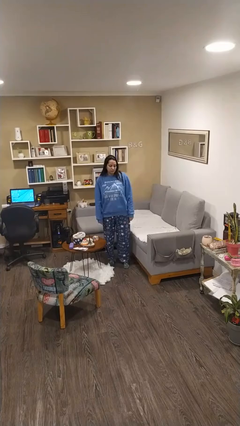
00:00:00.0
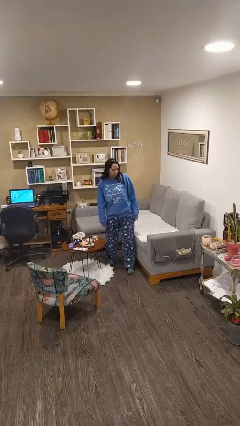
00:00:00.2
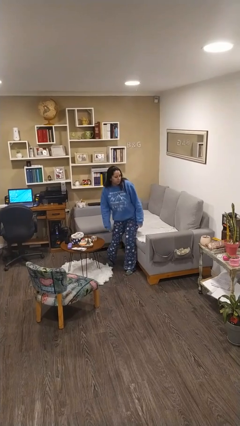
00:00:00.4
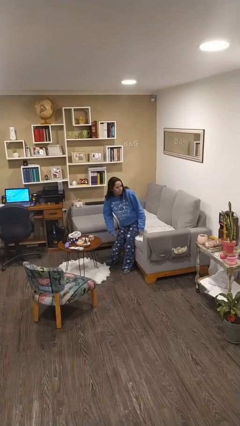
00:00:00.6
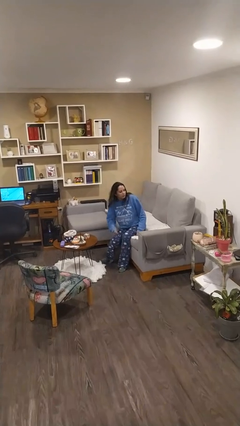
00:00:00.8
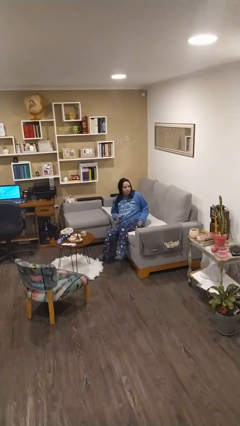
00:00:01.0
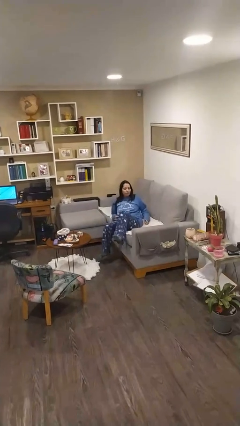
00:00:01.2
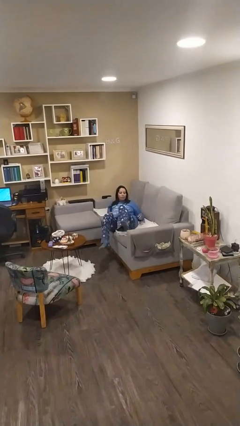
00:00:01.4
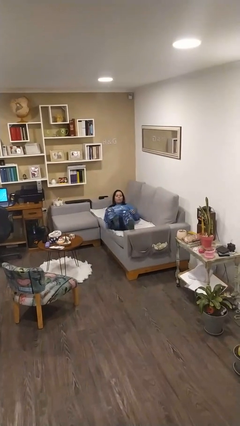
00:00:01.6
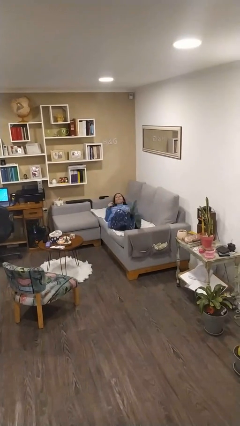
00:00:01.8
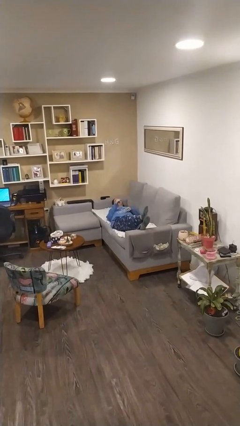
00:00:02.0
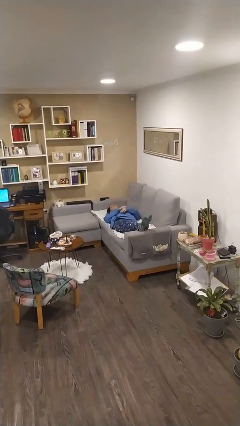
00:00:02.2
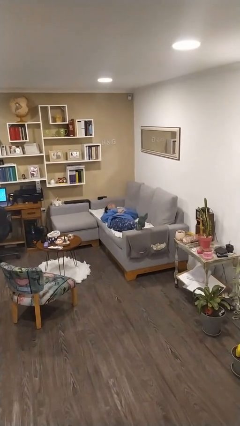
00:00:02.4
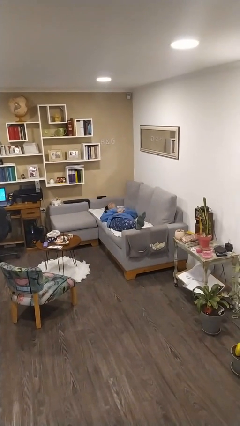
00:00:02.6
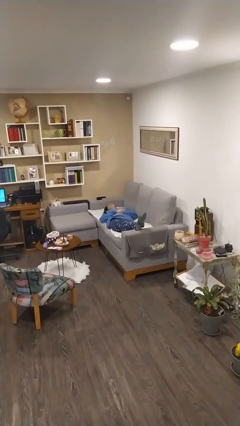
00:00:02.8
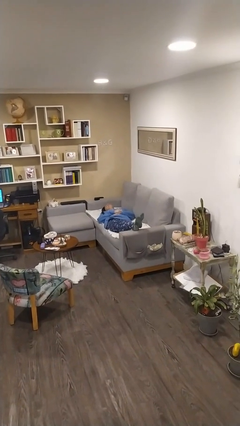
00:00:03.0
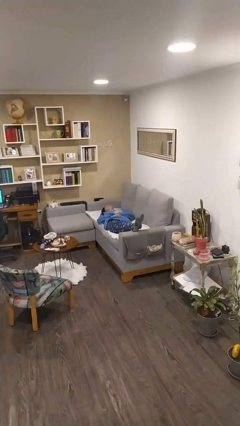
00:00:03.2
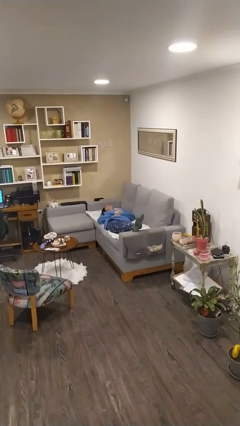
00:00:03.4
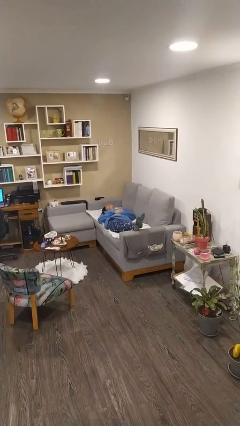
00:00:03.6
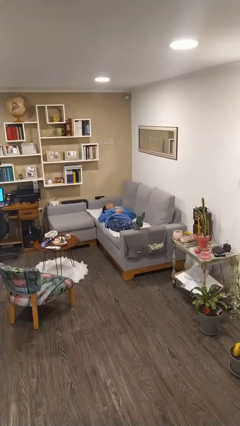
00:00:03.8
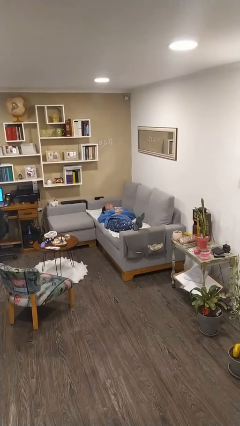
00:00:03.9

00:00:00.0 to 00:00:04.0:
person lies down on couch

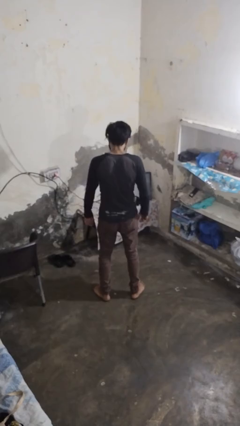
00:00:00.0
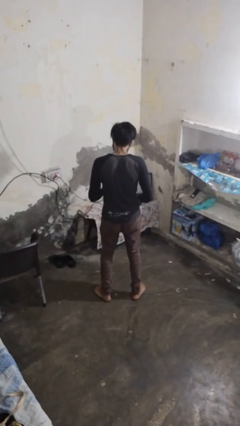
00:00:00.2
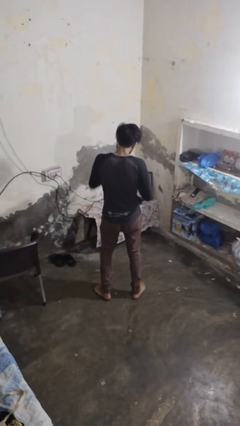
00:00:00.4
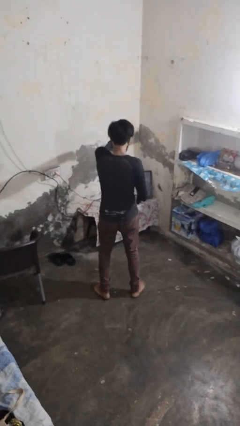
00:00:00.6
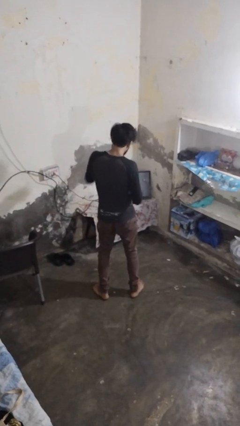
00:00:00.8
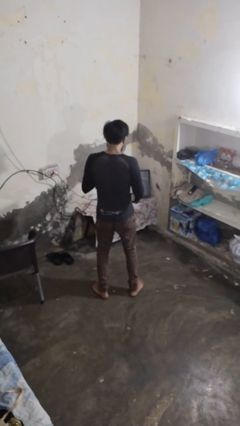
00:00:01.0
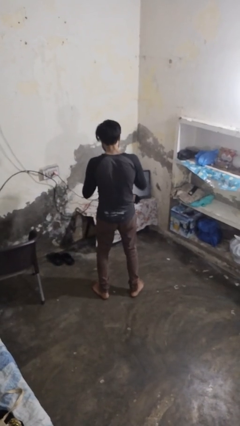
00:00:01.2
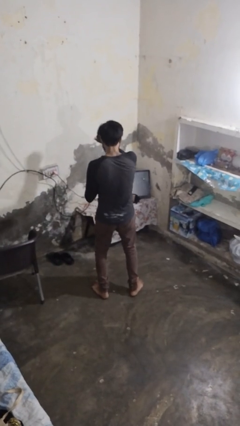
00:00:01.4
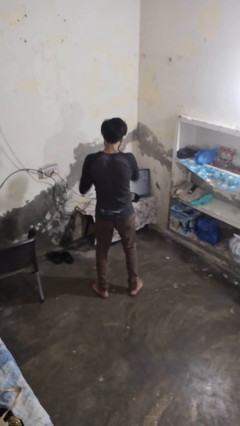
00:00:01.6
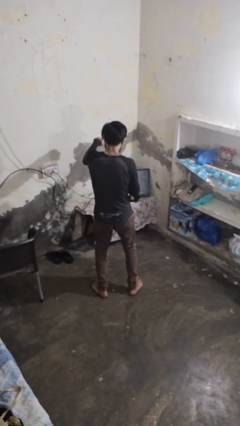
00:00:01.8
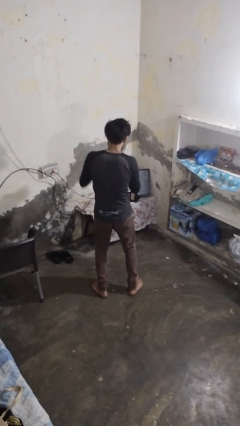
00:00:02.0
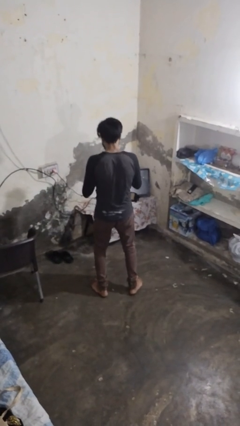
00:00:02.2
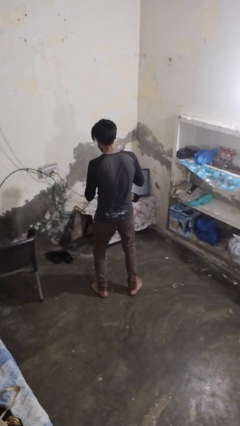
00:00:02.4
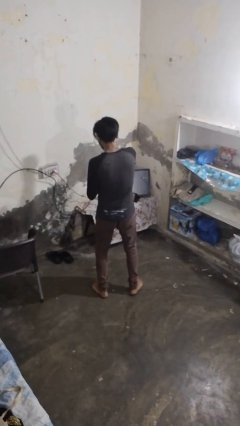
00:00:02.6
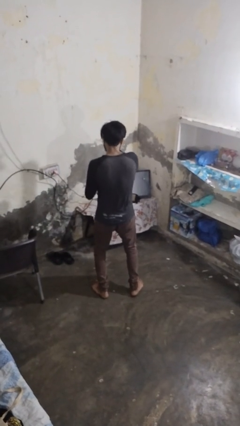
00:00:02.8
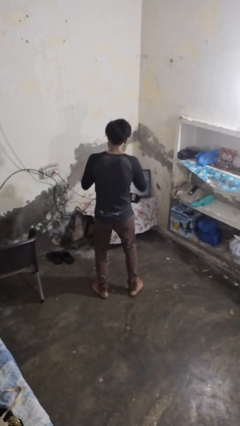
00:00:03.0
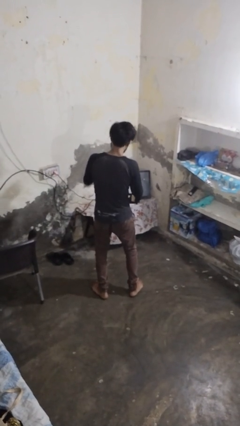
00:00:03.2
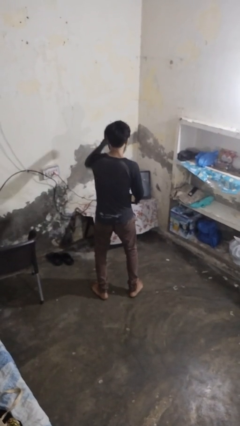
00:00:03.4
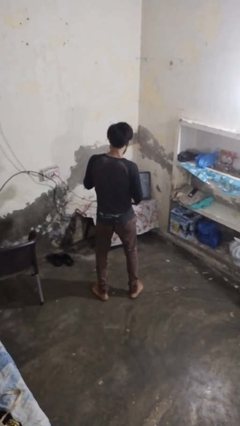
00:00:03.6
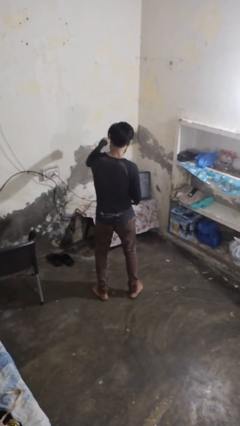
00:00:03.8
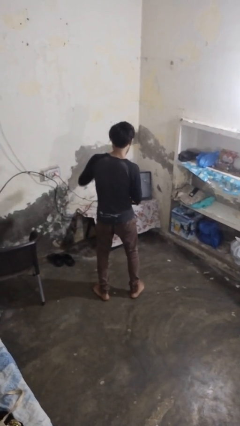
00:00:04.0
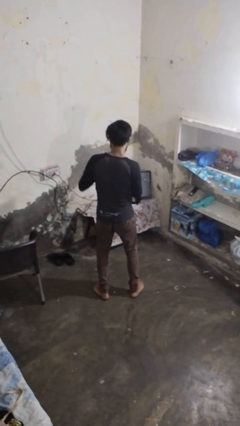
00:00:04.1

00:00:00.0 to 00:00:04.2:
person punches

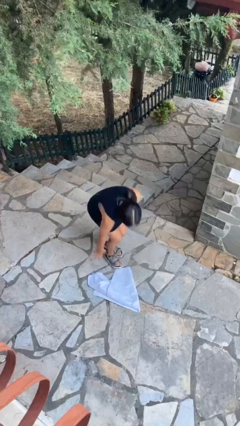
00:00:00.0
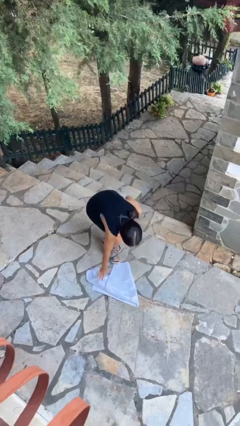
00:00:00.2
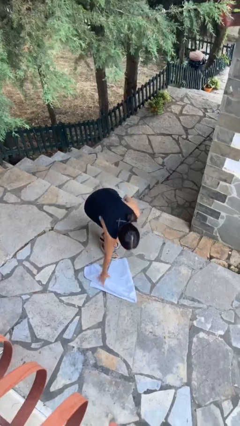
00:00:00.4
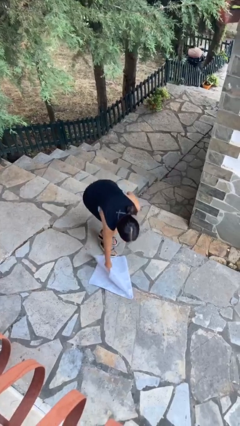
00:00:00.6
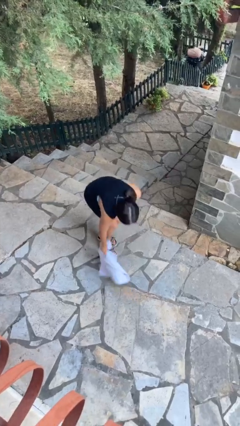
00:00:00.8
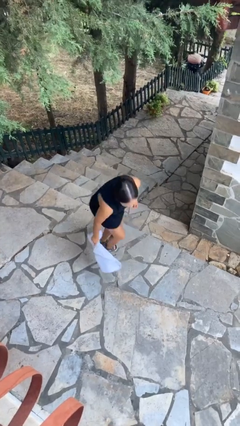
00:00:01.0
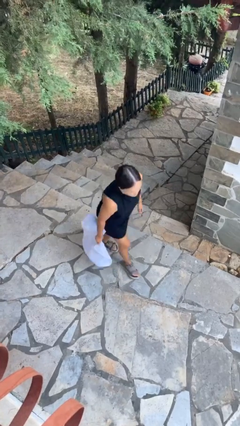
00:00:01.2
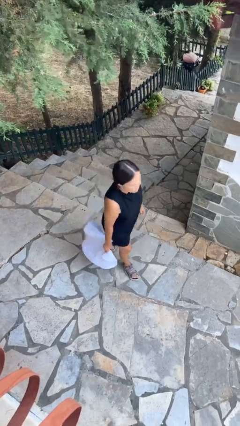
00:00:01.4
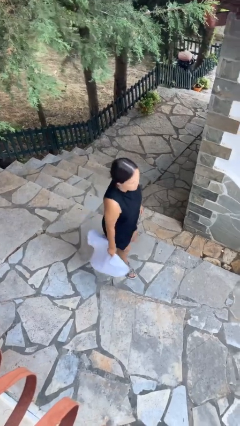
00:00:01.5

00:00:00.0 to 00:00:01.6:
person picks up object from floor

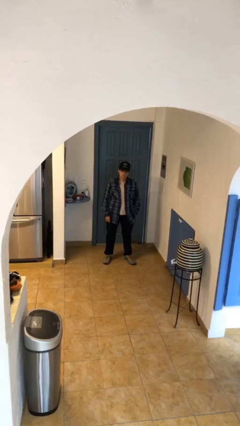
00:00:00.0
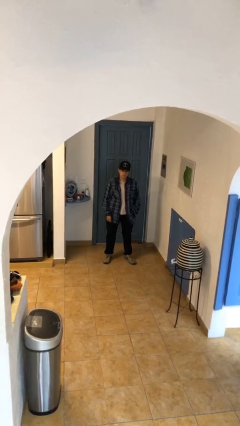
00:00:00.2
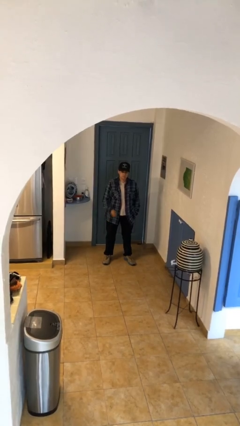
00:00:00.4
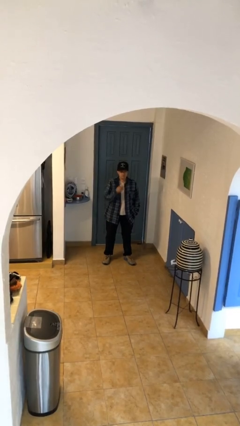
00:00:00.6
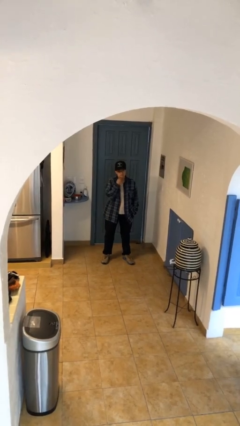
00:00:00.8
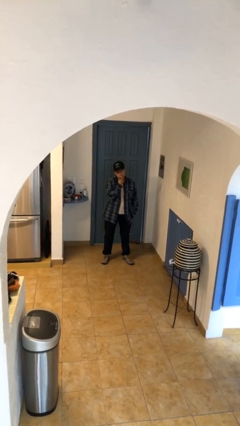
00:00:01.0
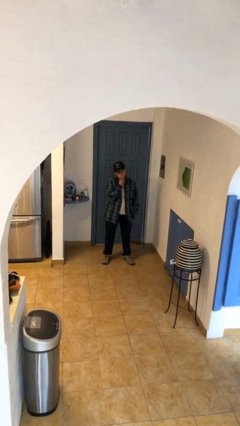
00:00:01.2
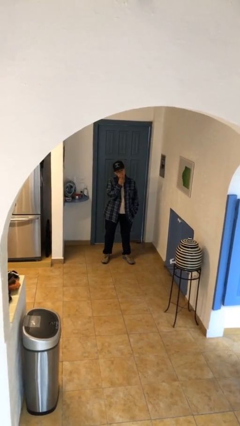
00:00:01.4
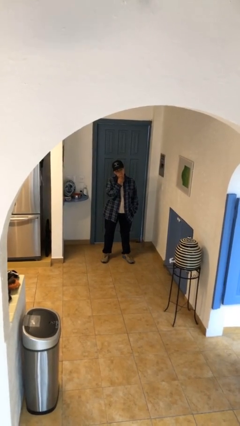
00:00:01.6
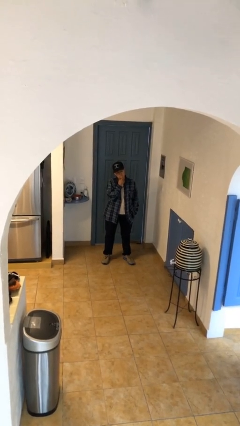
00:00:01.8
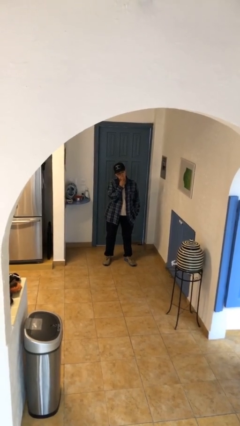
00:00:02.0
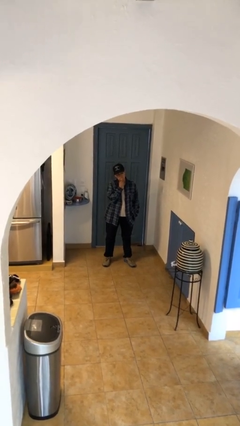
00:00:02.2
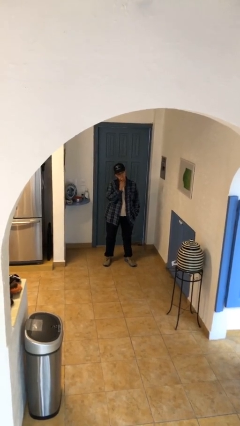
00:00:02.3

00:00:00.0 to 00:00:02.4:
person strokes chin

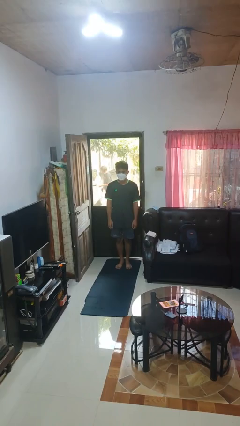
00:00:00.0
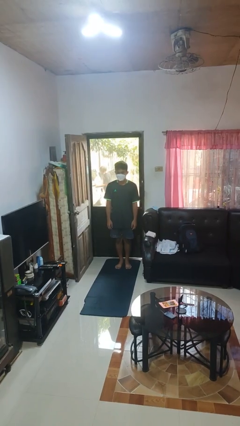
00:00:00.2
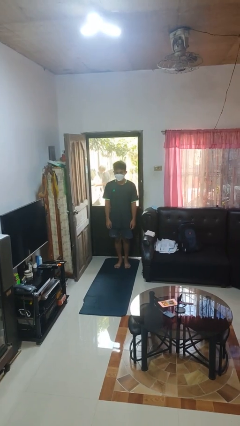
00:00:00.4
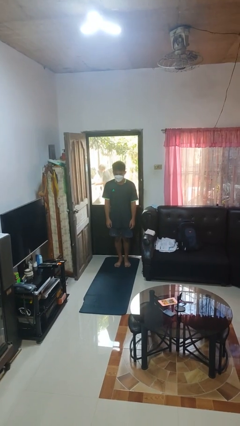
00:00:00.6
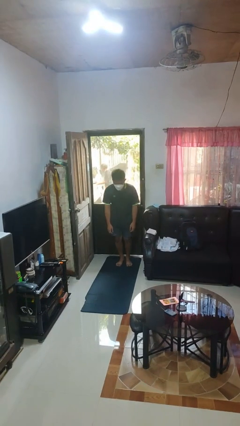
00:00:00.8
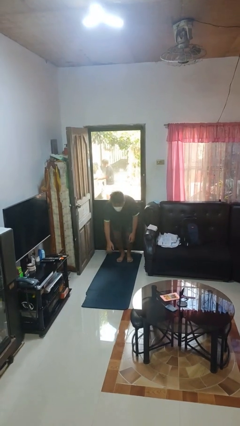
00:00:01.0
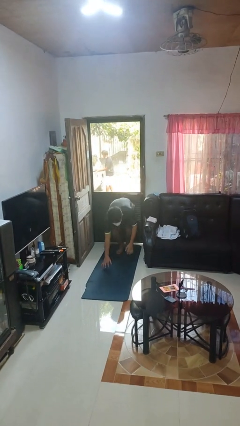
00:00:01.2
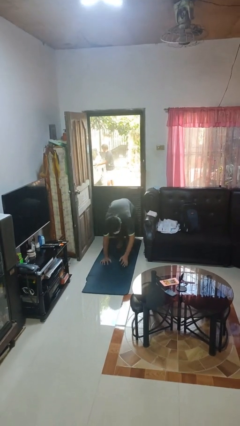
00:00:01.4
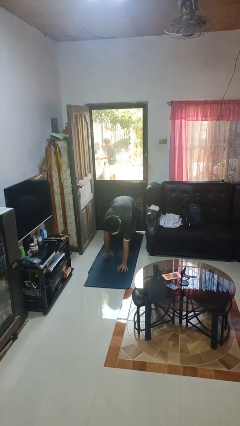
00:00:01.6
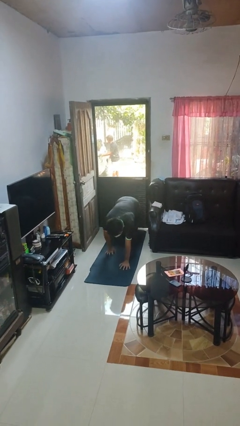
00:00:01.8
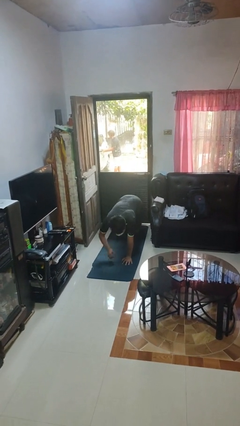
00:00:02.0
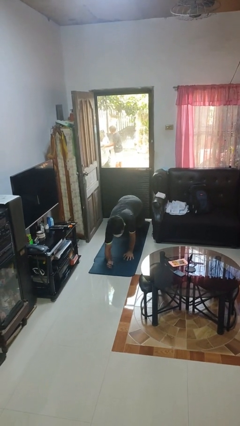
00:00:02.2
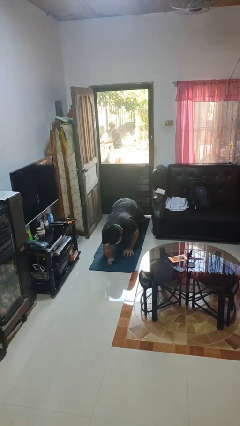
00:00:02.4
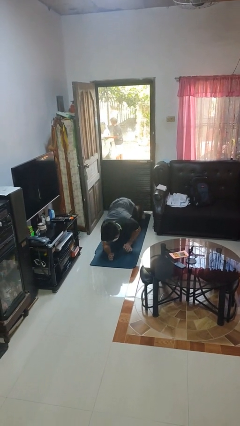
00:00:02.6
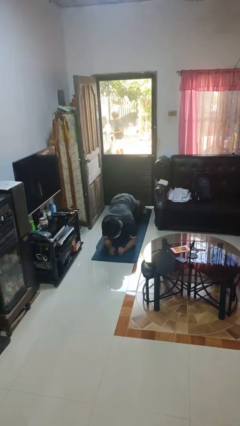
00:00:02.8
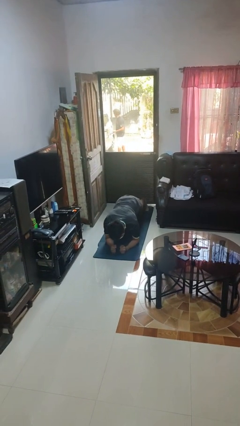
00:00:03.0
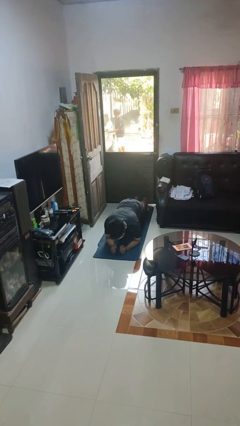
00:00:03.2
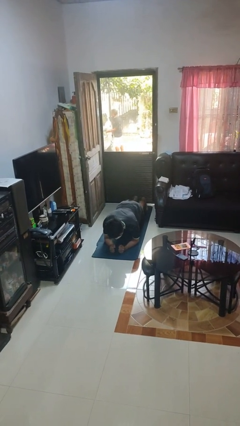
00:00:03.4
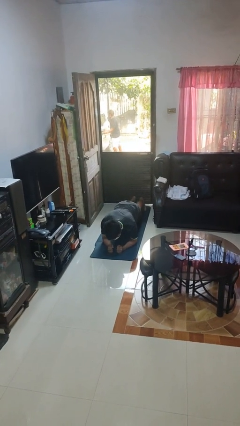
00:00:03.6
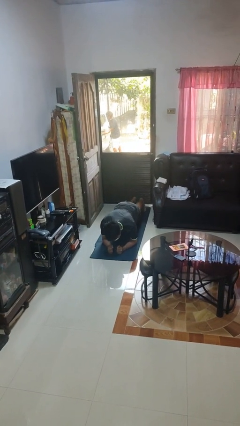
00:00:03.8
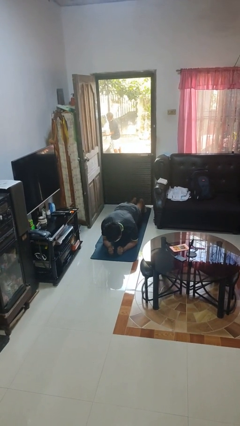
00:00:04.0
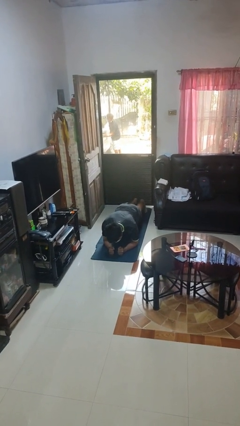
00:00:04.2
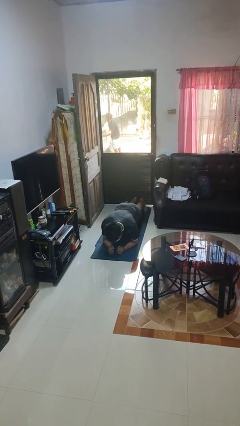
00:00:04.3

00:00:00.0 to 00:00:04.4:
person exercises with plank

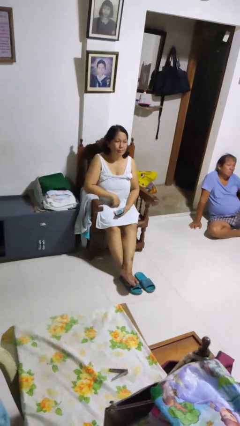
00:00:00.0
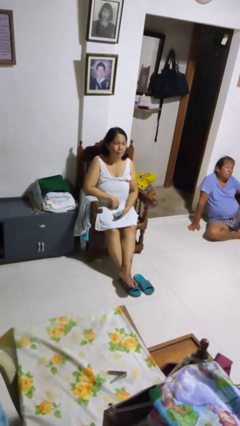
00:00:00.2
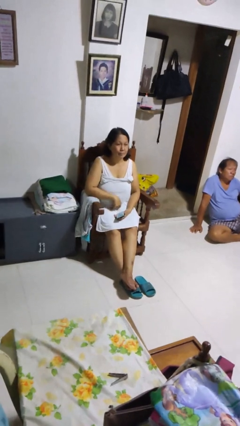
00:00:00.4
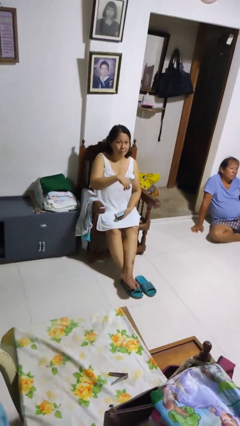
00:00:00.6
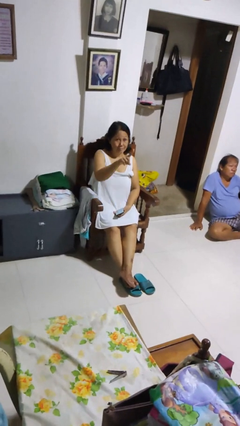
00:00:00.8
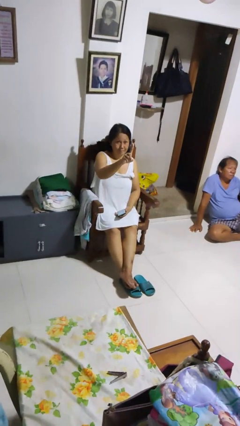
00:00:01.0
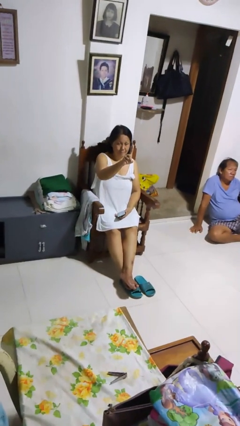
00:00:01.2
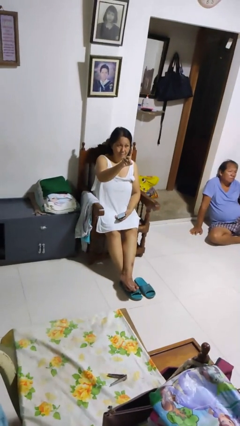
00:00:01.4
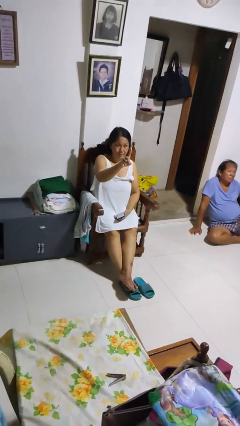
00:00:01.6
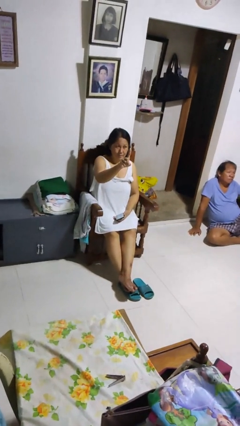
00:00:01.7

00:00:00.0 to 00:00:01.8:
person gestures number one
